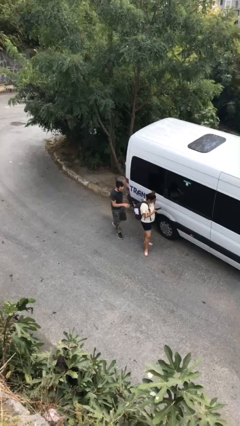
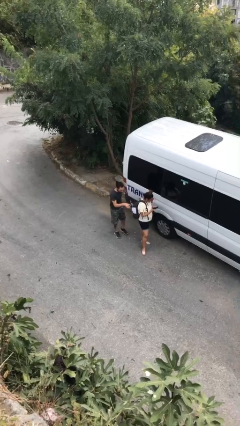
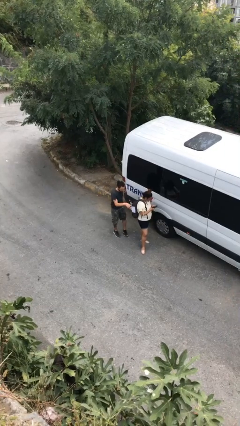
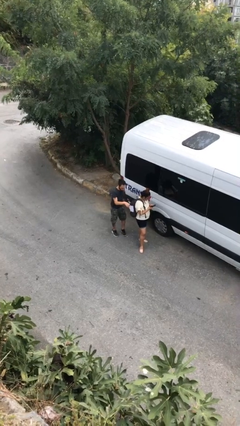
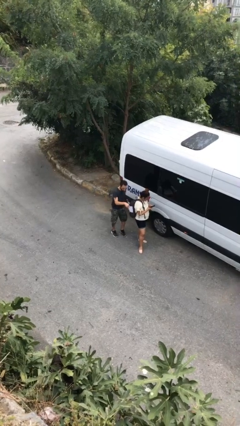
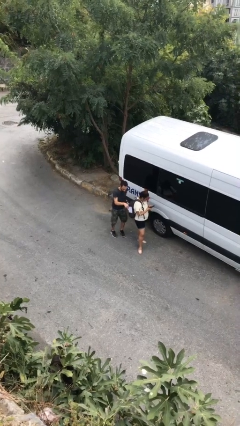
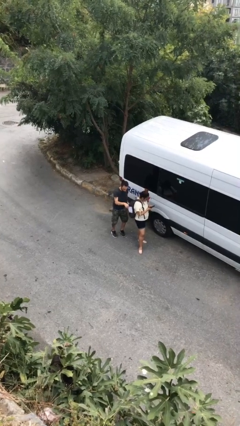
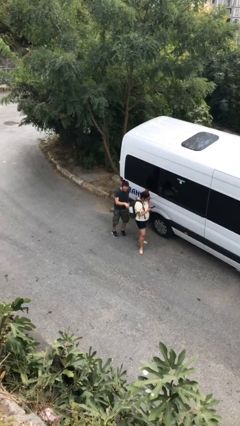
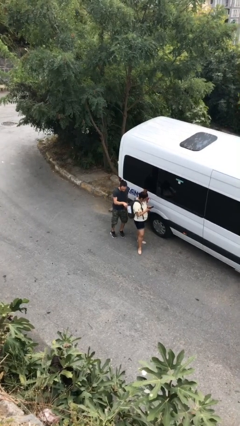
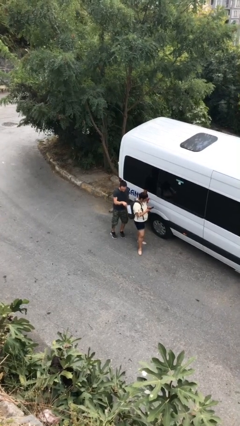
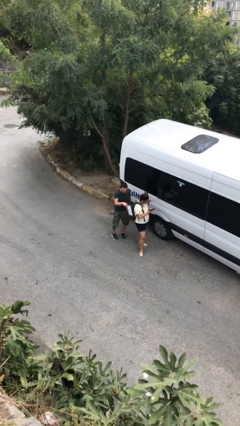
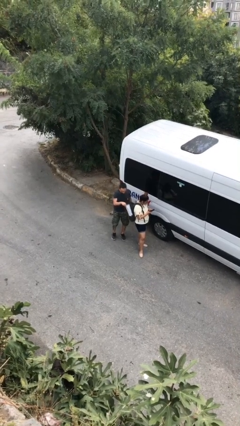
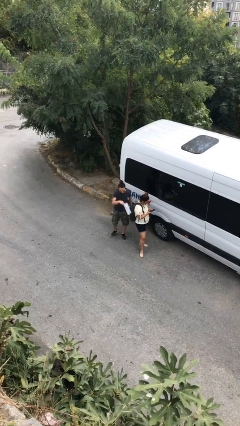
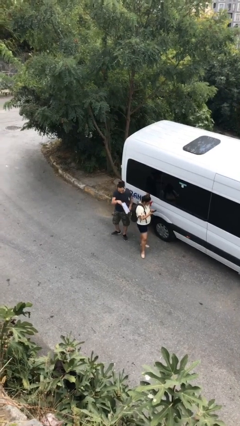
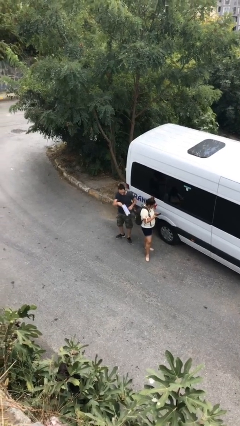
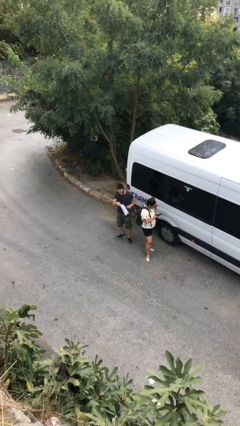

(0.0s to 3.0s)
person steals object from person

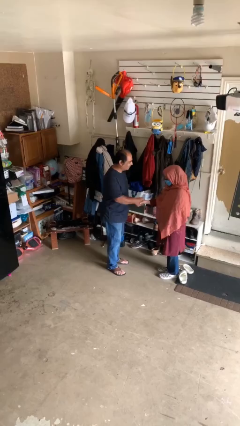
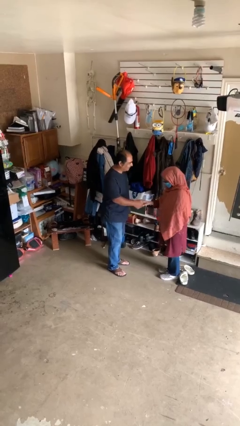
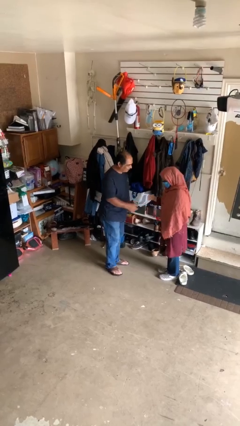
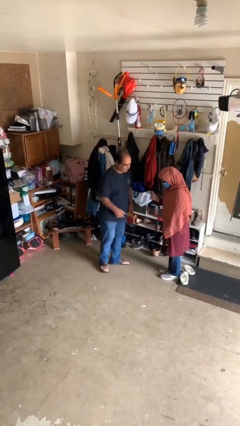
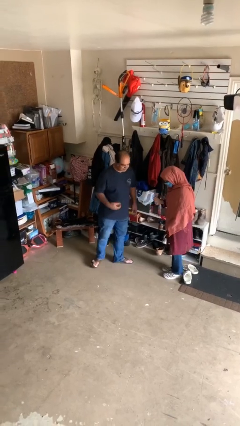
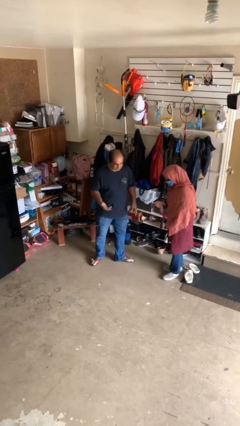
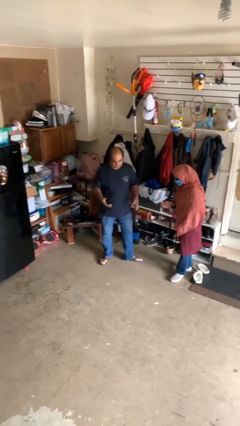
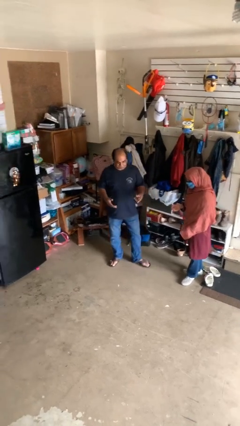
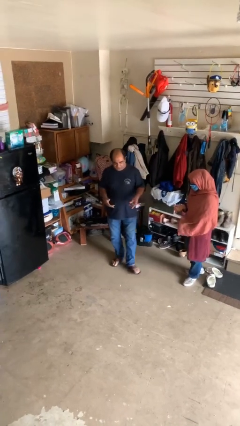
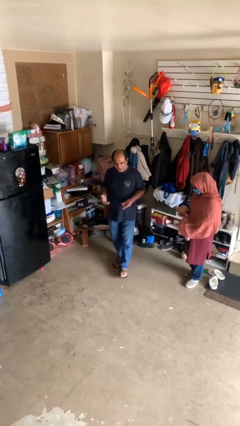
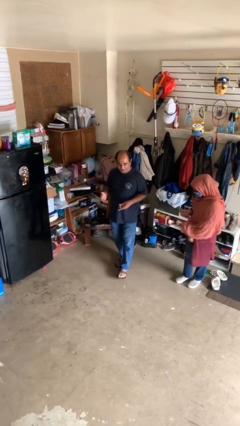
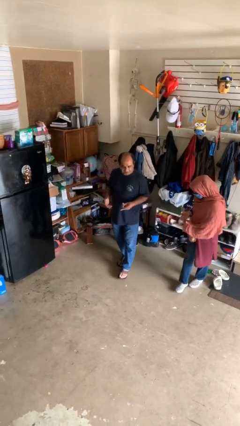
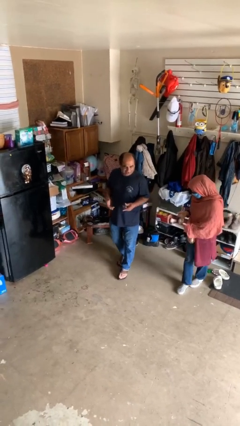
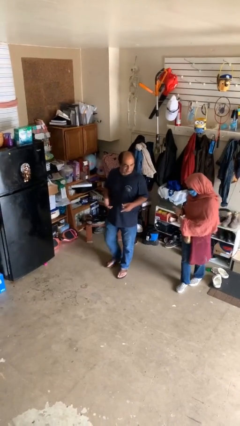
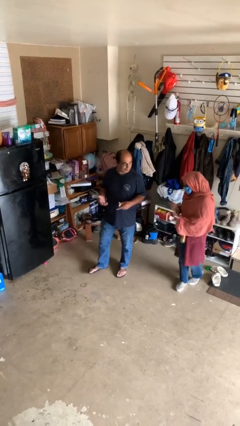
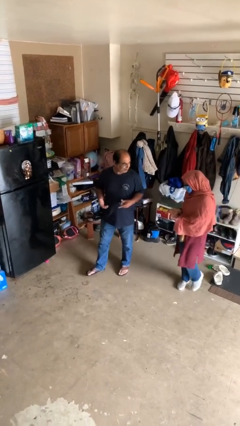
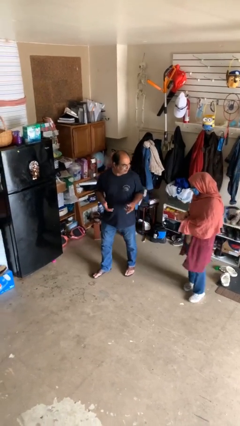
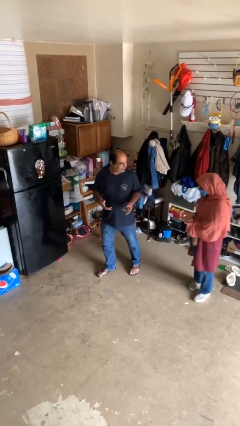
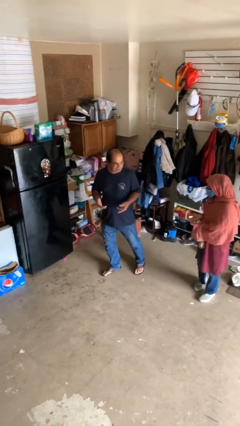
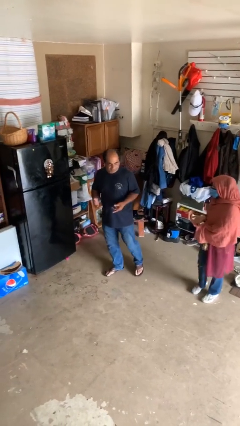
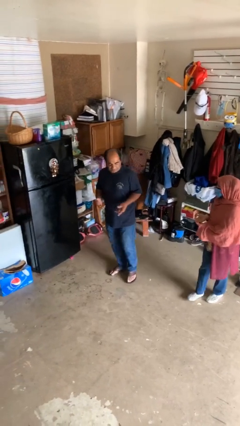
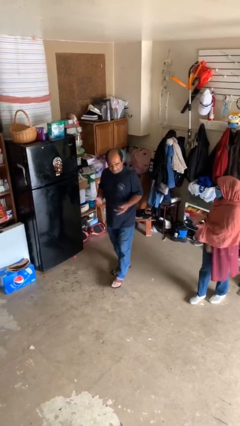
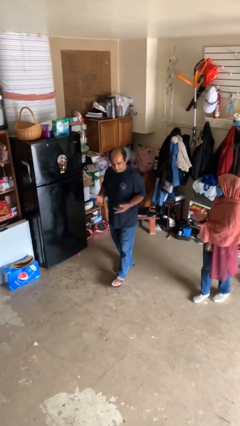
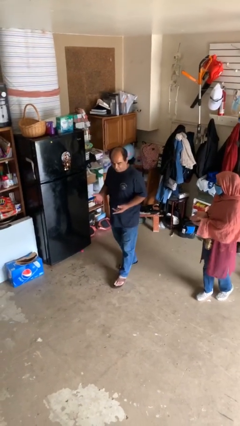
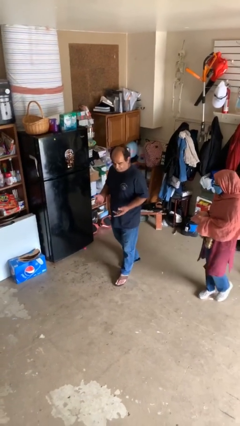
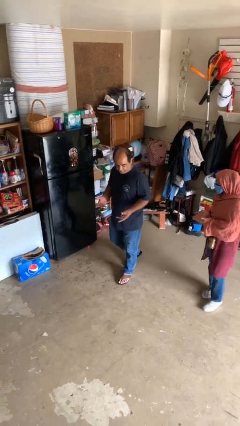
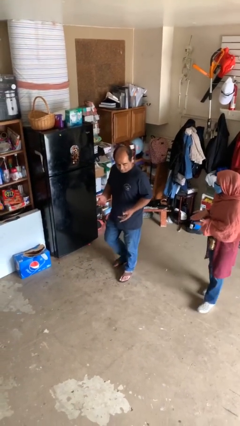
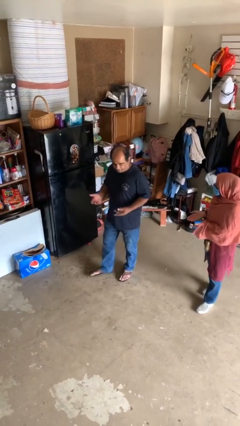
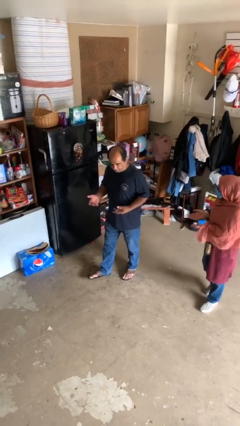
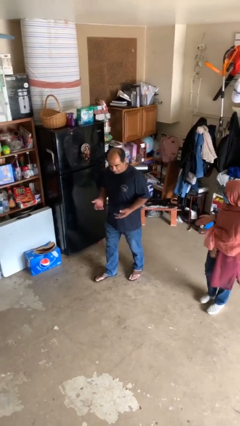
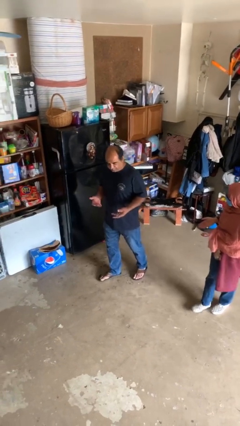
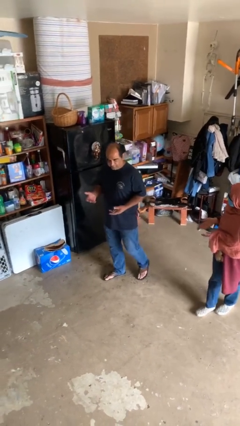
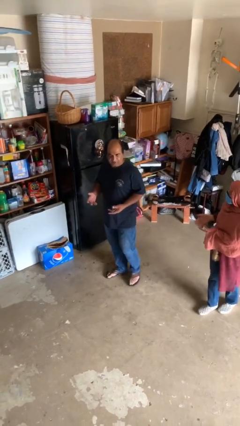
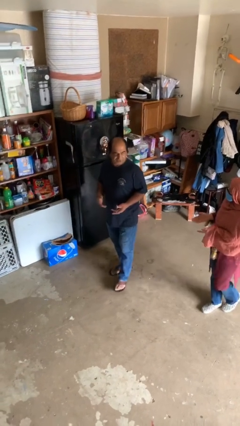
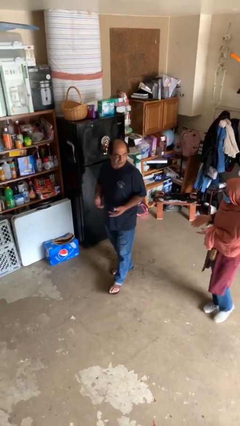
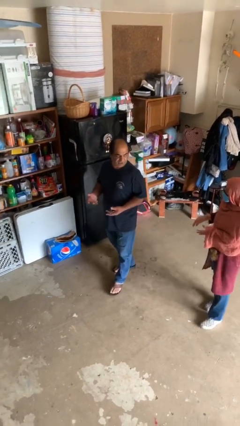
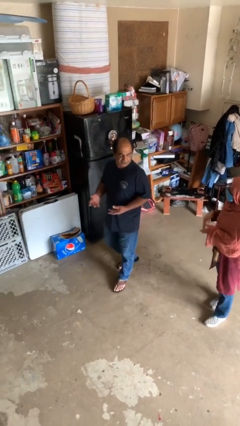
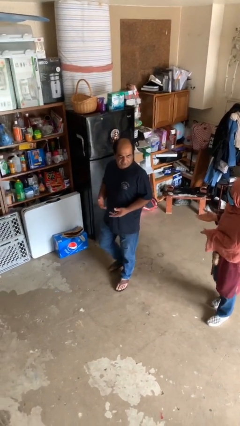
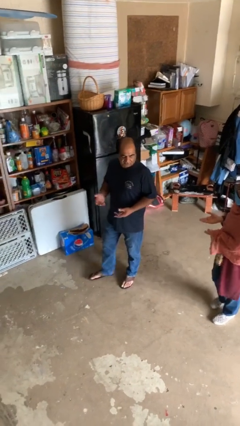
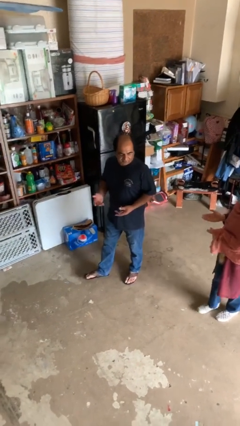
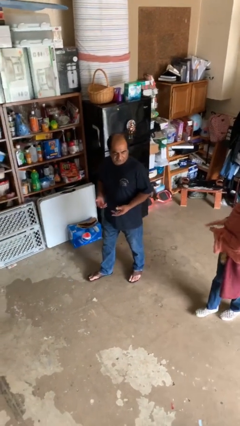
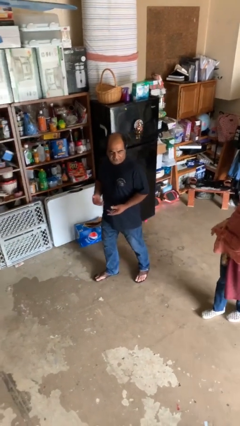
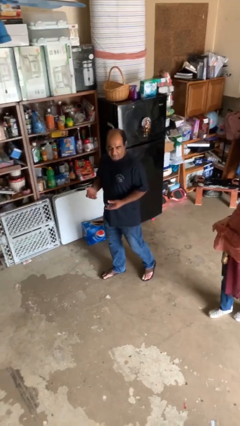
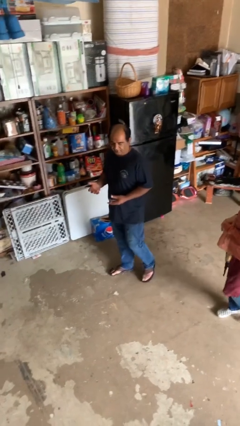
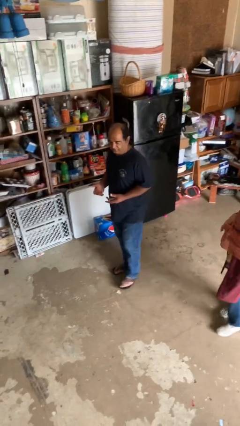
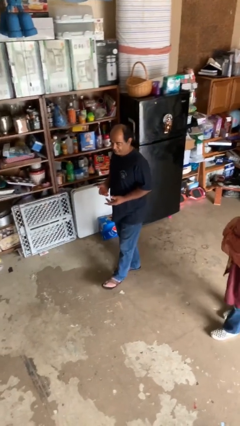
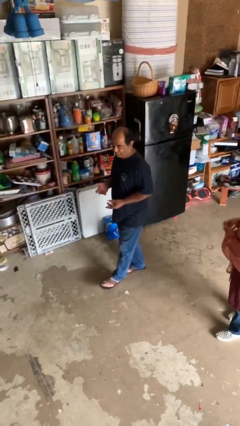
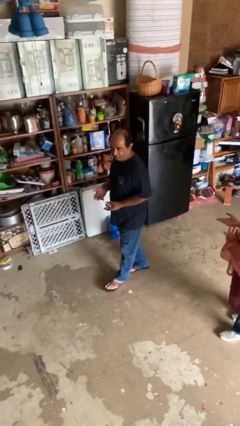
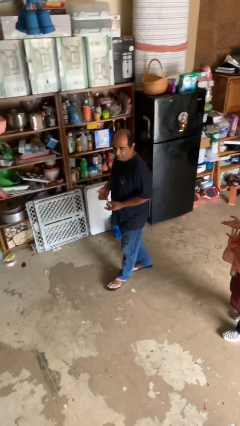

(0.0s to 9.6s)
person talks to person

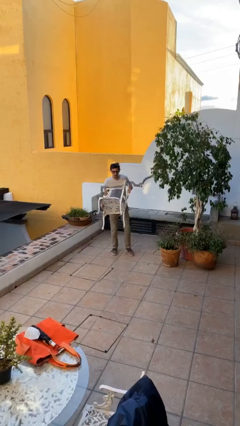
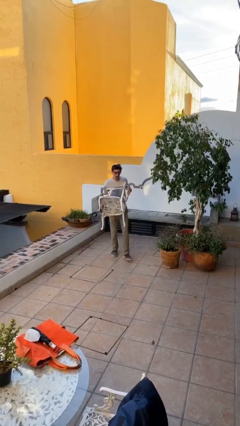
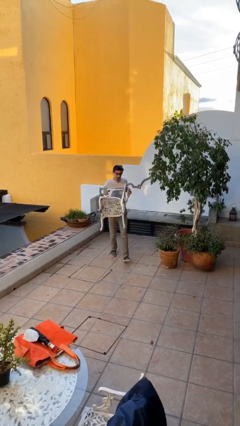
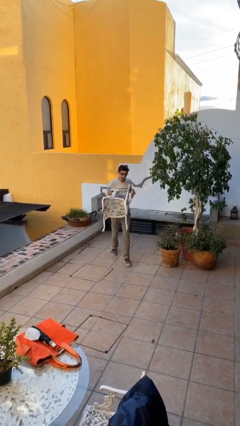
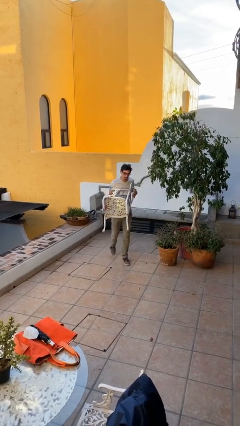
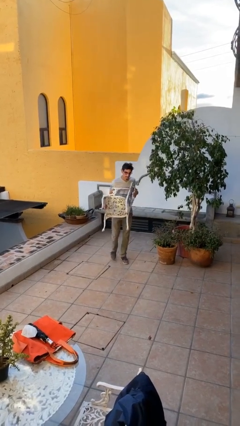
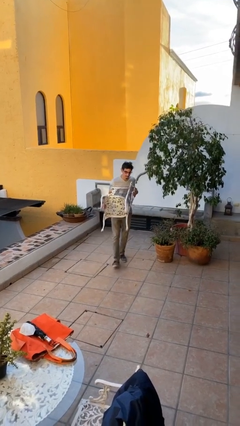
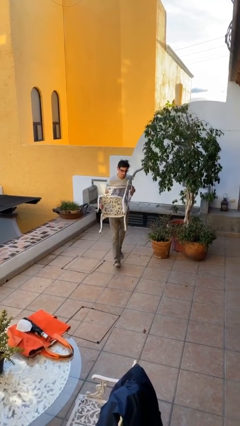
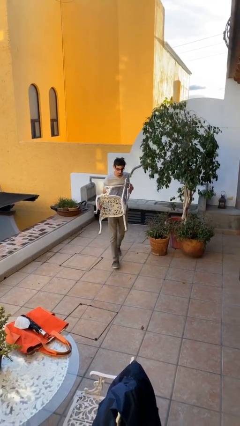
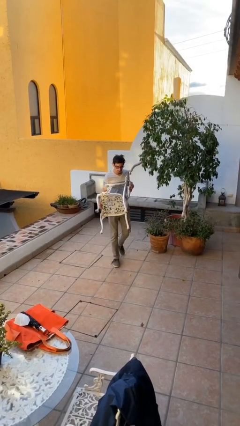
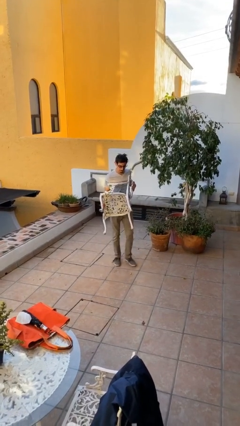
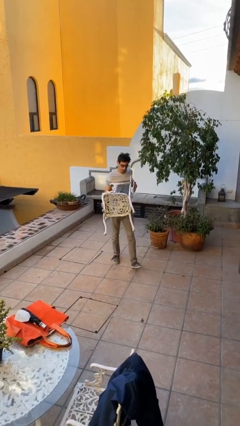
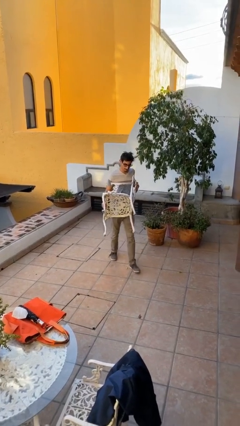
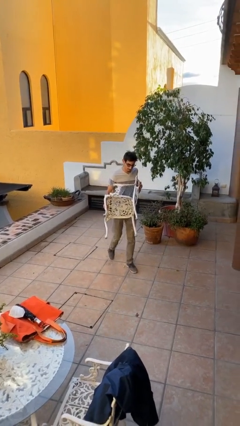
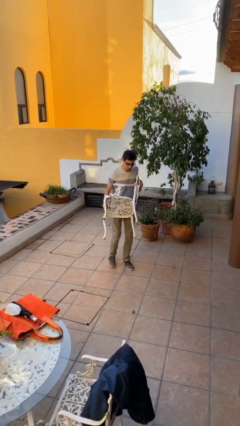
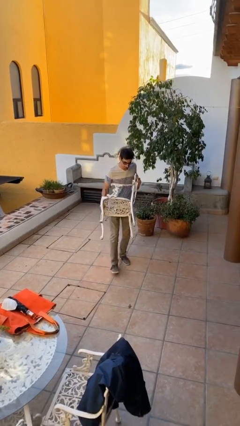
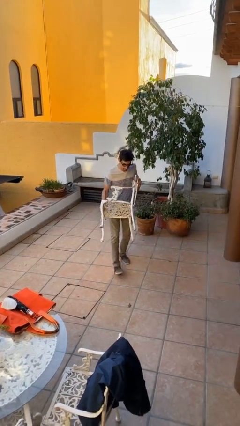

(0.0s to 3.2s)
person carries heavy object

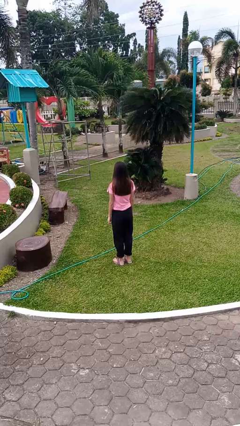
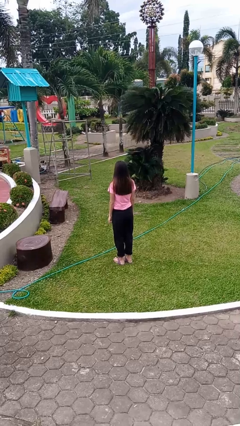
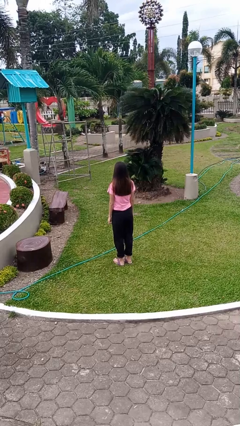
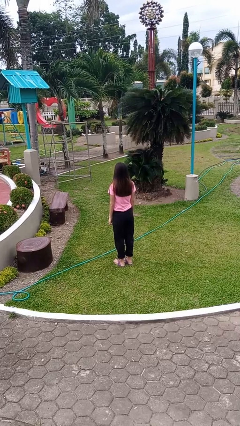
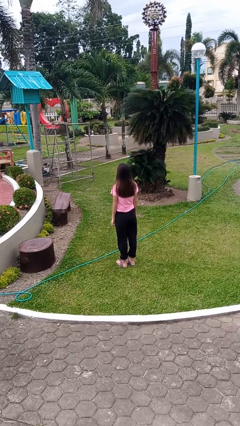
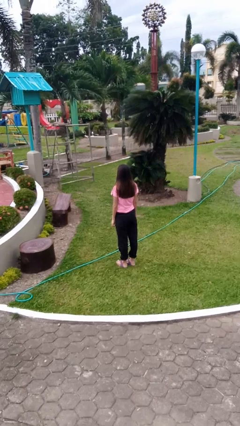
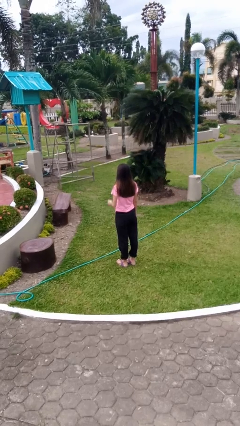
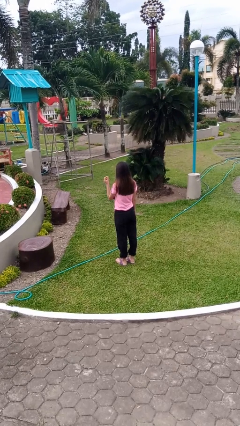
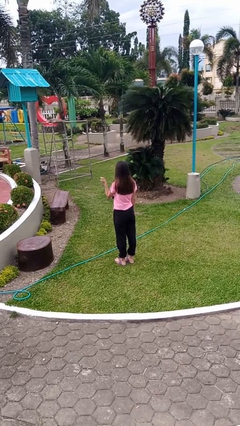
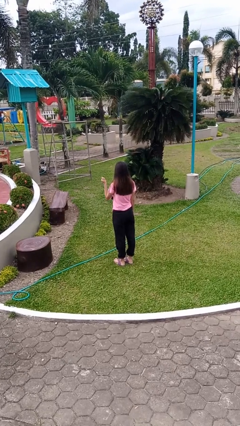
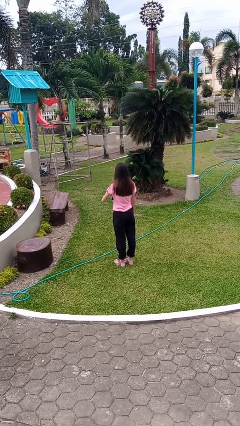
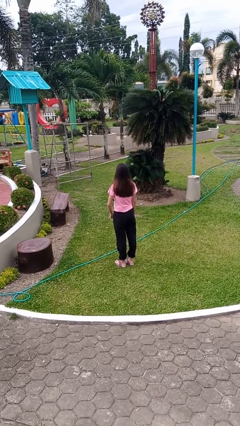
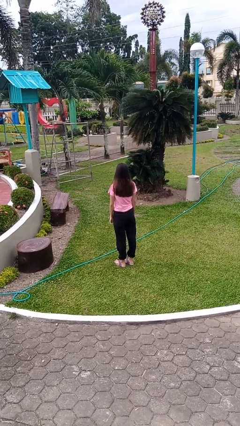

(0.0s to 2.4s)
person snaps fingers
